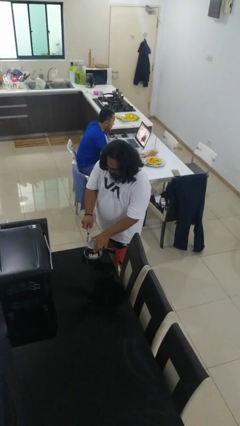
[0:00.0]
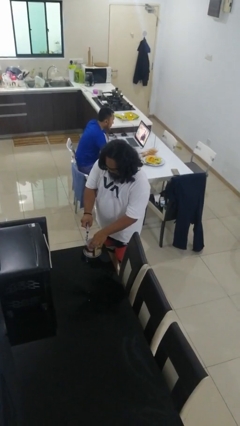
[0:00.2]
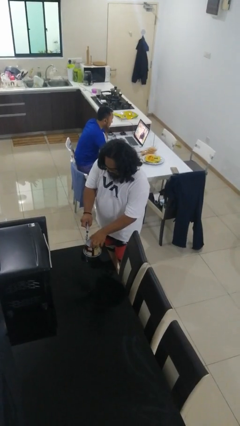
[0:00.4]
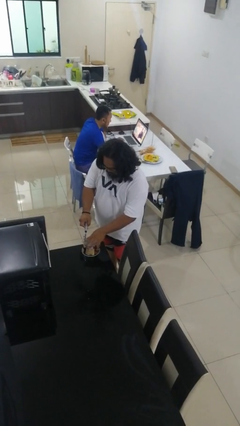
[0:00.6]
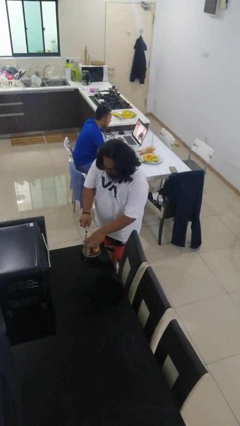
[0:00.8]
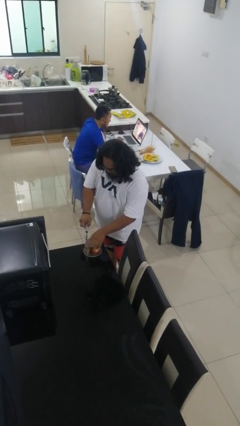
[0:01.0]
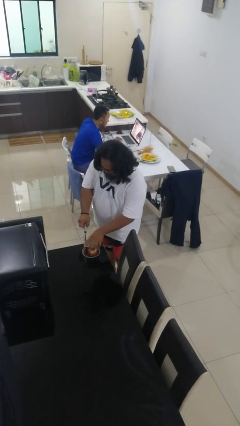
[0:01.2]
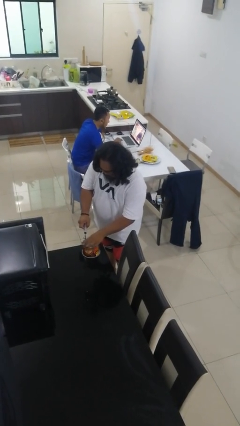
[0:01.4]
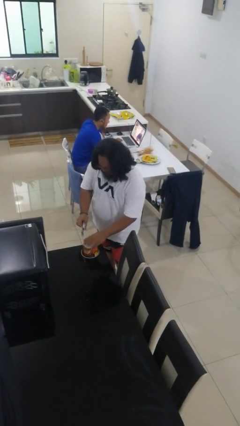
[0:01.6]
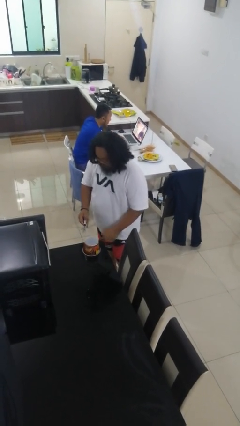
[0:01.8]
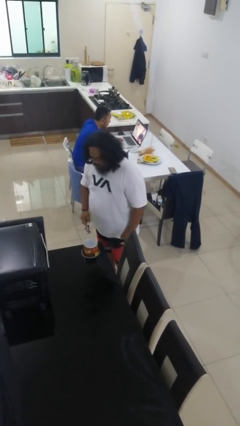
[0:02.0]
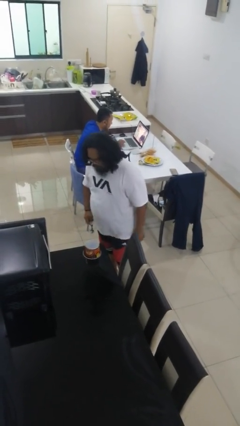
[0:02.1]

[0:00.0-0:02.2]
person opens can with can opener

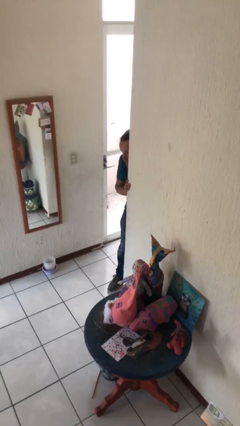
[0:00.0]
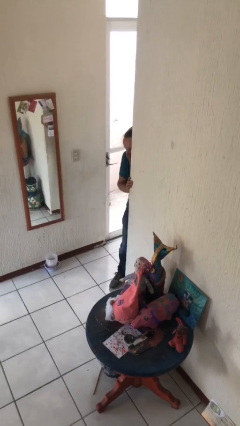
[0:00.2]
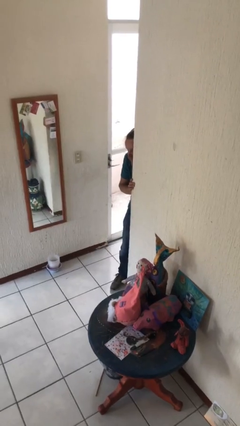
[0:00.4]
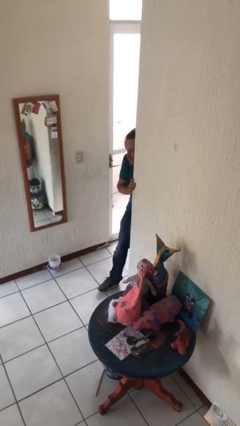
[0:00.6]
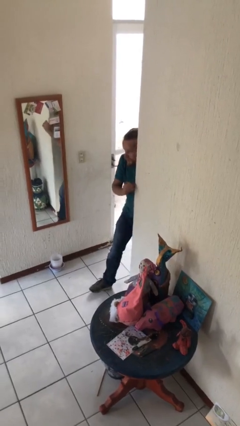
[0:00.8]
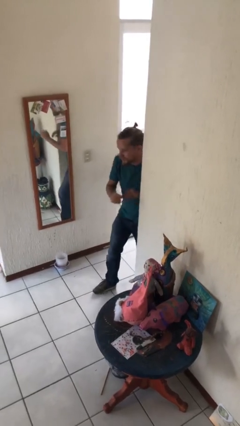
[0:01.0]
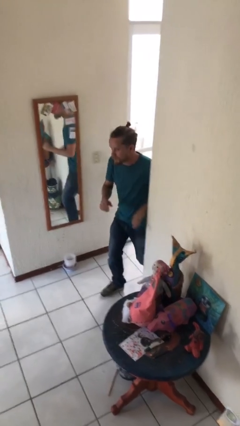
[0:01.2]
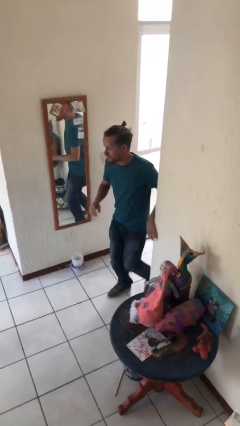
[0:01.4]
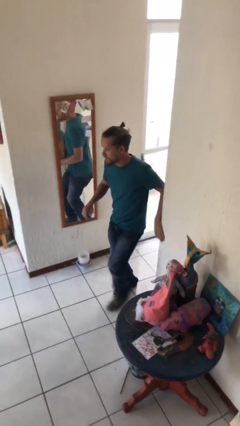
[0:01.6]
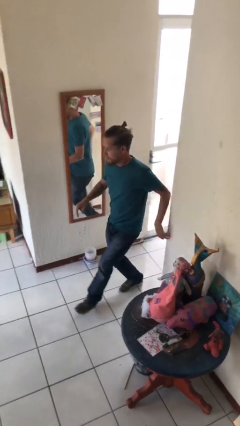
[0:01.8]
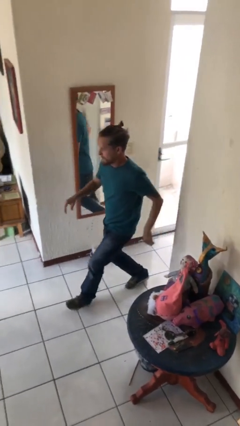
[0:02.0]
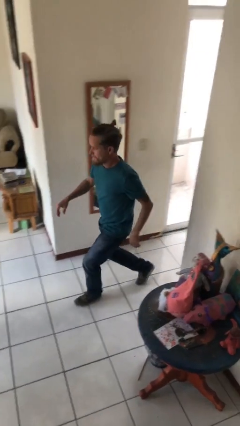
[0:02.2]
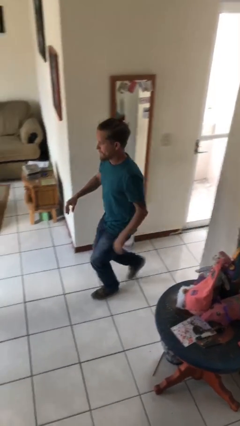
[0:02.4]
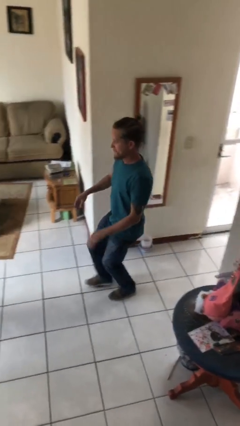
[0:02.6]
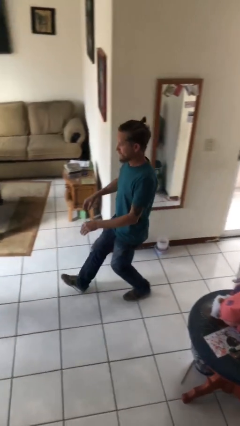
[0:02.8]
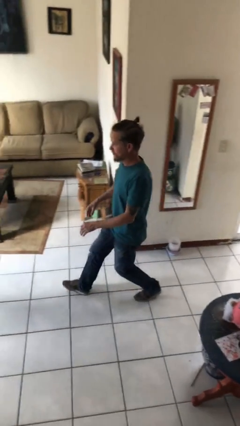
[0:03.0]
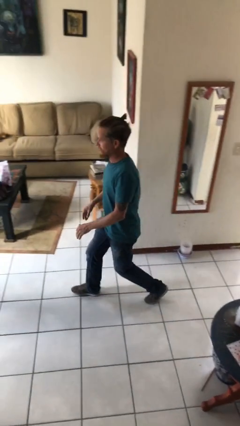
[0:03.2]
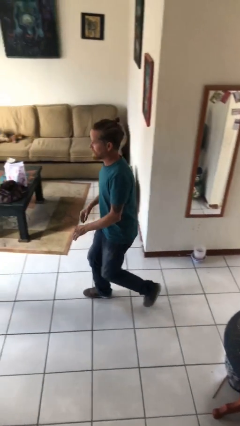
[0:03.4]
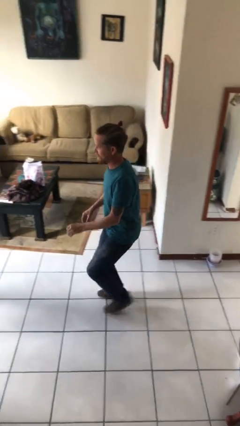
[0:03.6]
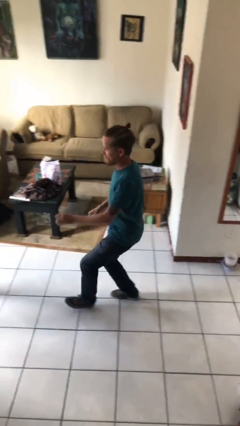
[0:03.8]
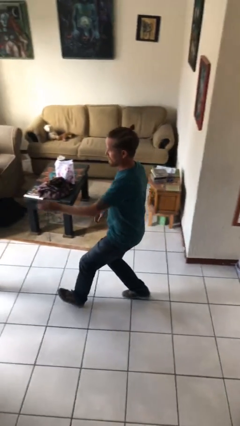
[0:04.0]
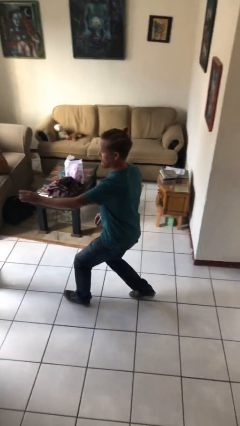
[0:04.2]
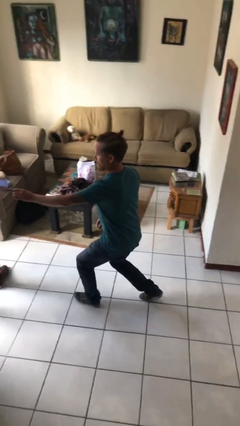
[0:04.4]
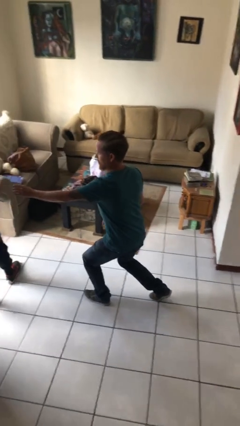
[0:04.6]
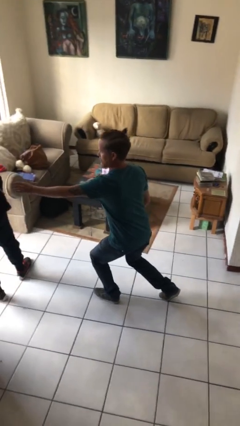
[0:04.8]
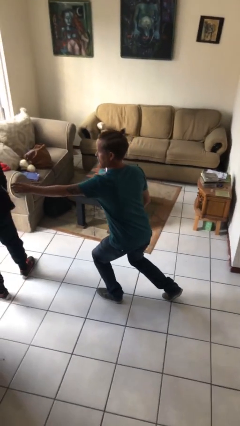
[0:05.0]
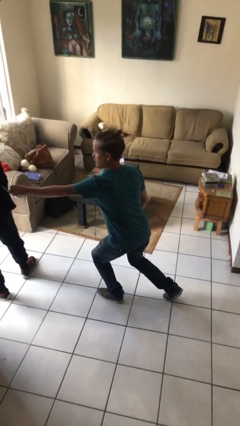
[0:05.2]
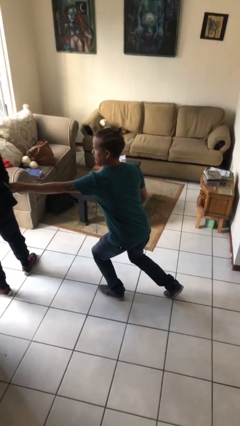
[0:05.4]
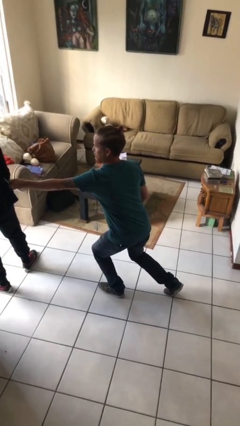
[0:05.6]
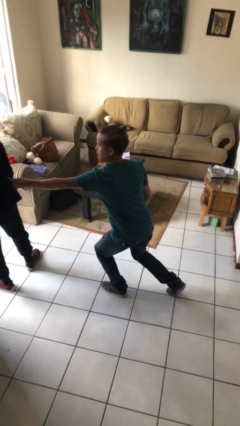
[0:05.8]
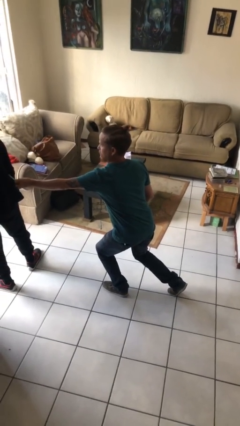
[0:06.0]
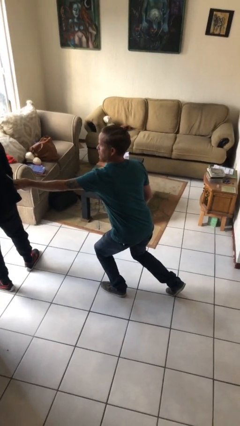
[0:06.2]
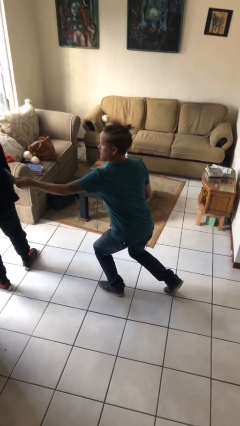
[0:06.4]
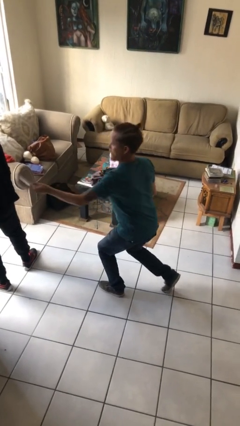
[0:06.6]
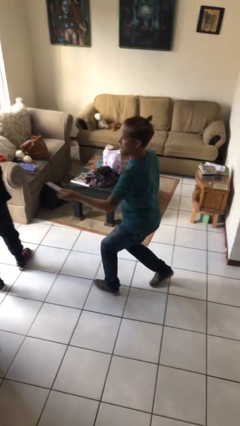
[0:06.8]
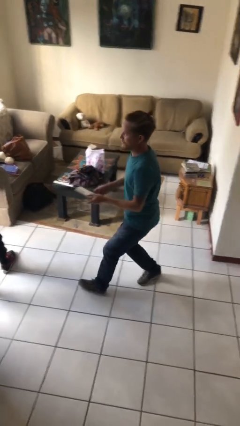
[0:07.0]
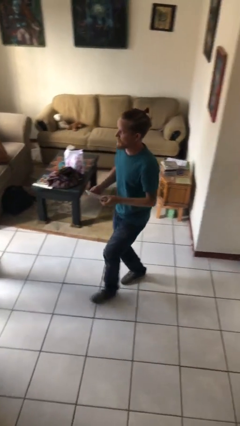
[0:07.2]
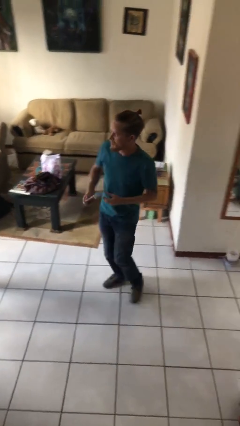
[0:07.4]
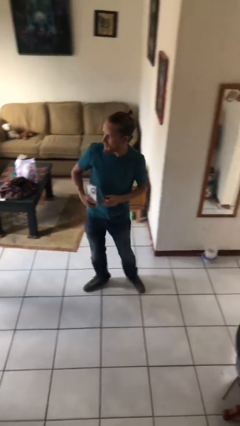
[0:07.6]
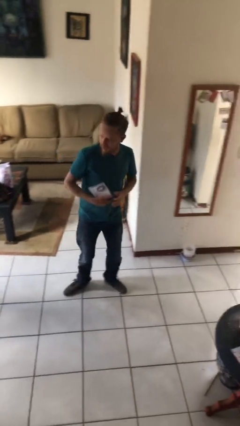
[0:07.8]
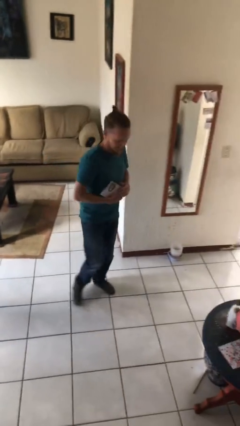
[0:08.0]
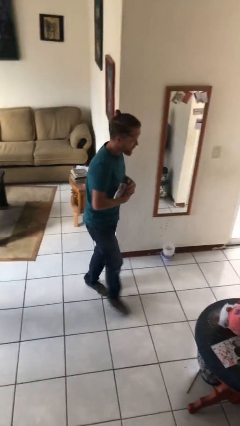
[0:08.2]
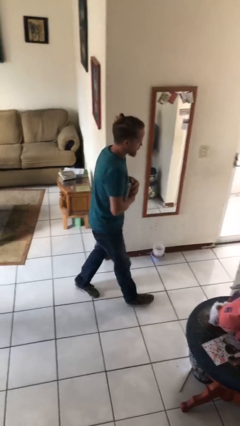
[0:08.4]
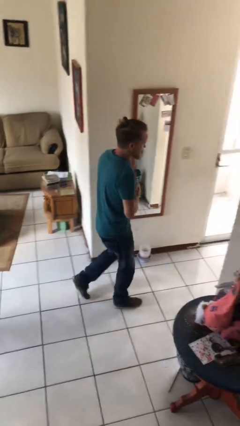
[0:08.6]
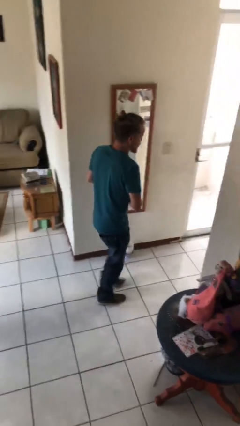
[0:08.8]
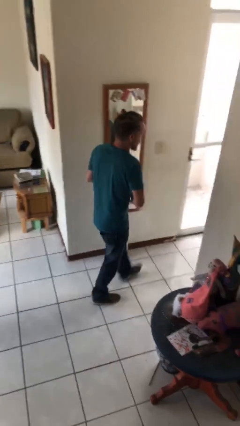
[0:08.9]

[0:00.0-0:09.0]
person steals object from person

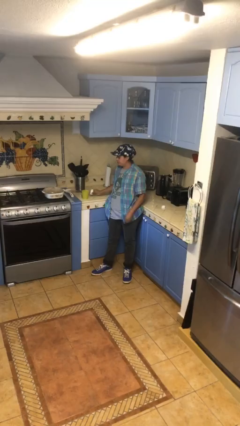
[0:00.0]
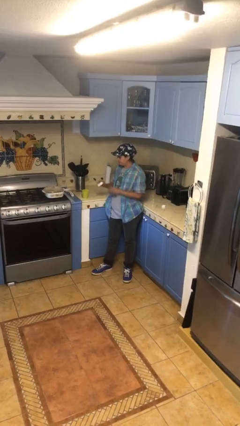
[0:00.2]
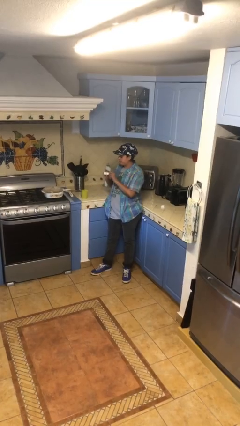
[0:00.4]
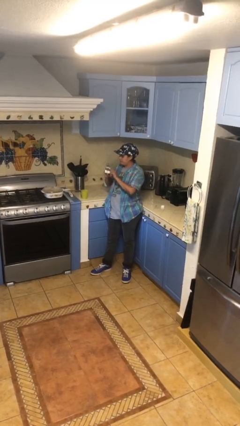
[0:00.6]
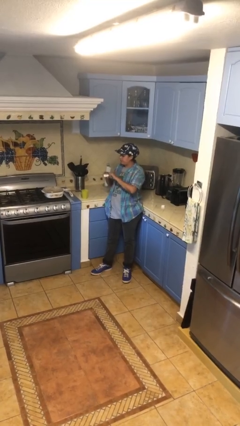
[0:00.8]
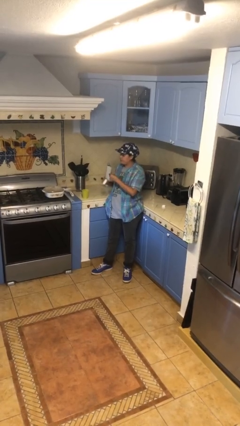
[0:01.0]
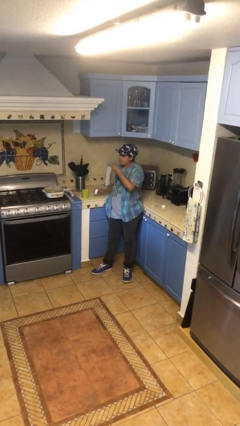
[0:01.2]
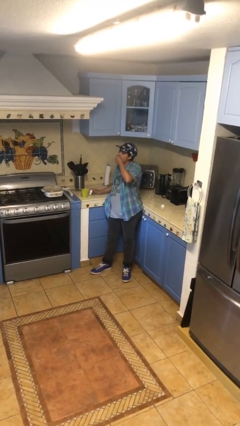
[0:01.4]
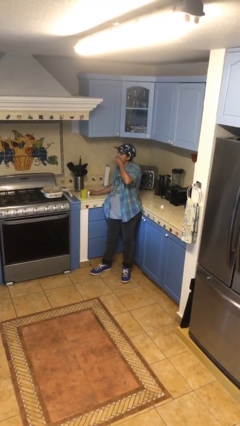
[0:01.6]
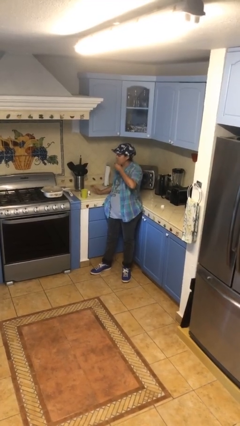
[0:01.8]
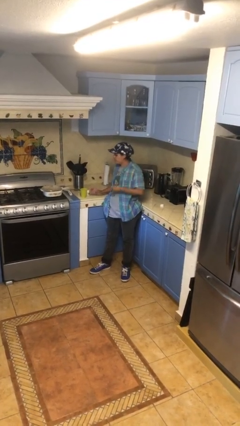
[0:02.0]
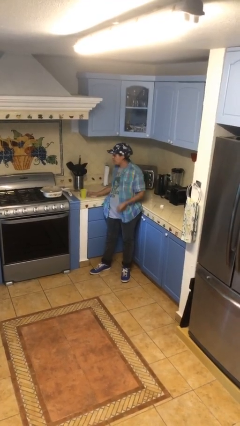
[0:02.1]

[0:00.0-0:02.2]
person takes medicine pills

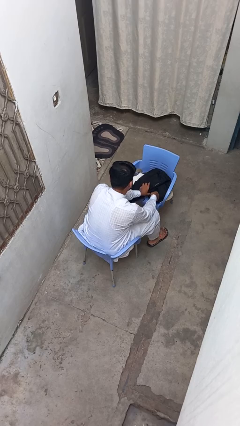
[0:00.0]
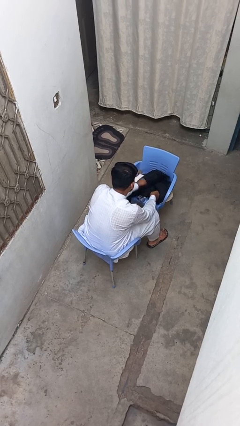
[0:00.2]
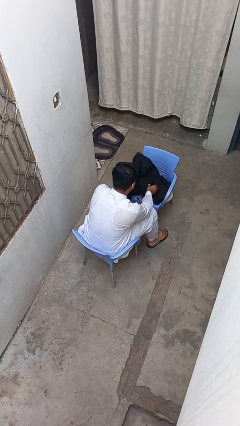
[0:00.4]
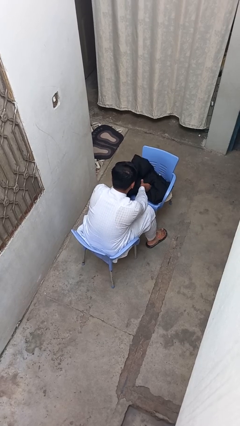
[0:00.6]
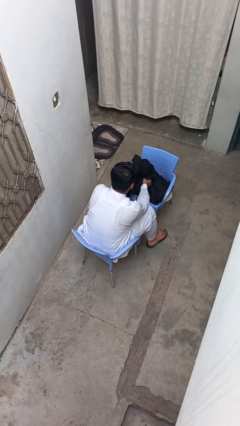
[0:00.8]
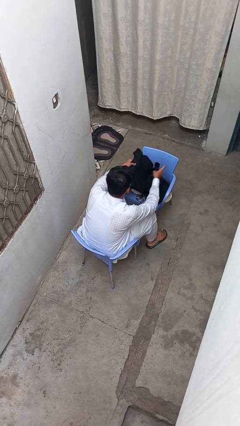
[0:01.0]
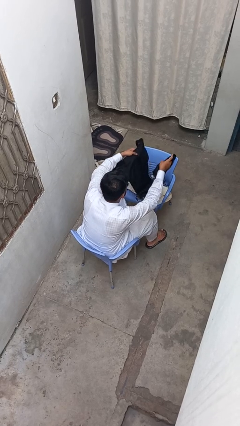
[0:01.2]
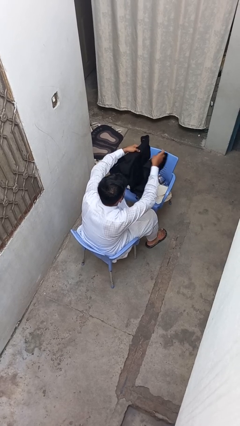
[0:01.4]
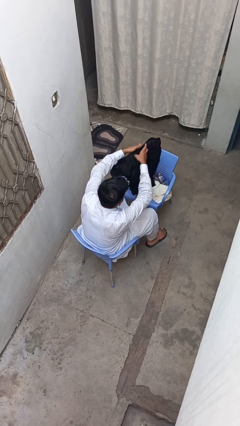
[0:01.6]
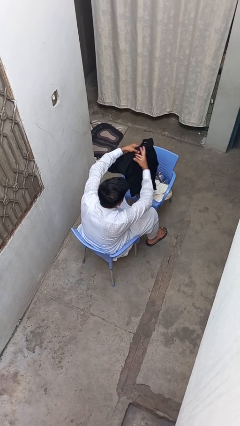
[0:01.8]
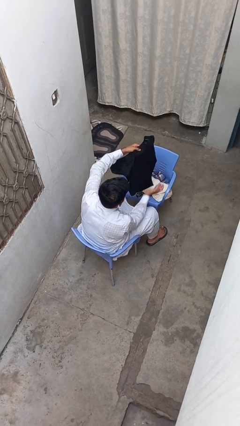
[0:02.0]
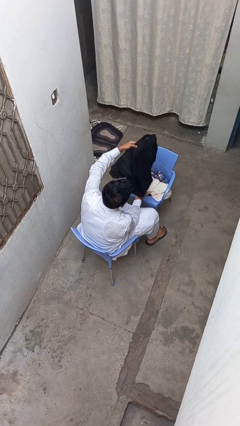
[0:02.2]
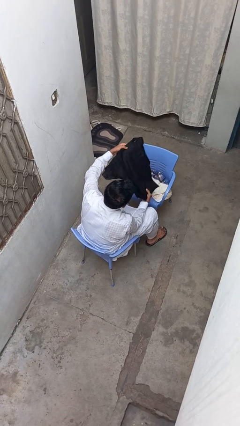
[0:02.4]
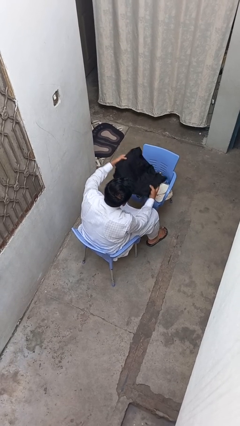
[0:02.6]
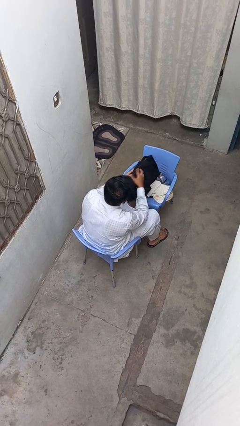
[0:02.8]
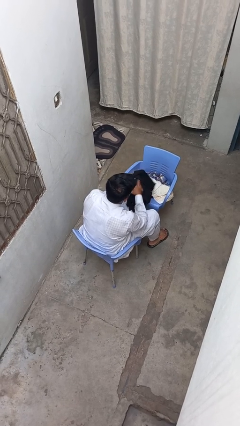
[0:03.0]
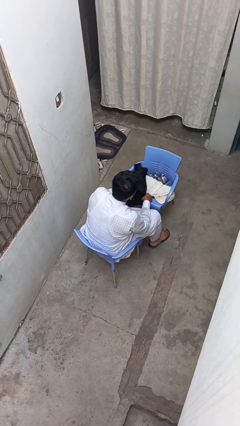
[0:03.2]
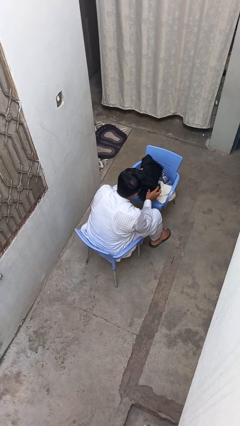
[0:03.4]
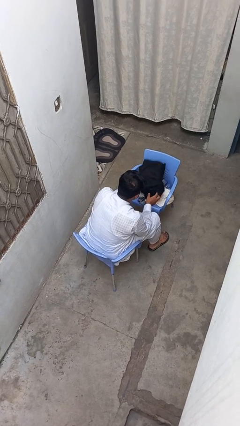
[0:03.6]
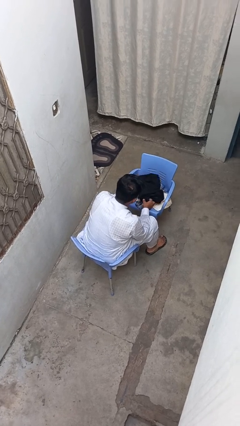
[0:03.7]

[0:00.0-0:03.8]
person folds pants

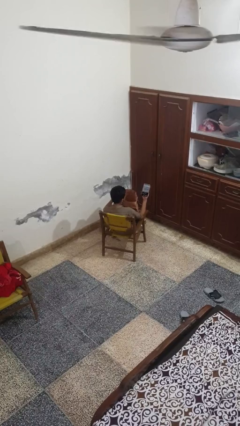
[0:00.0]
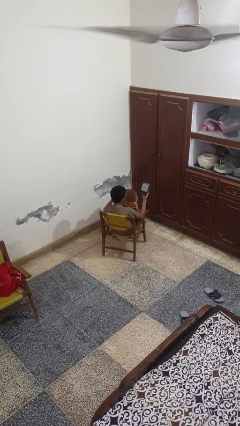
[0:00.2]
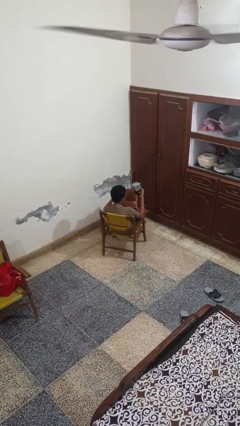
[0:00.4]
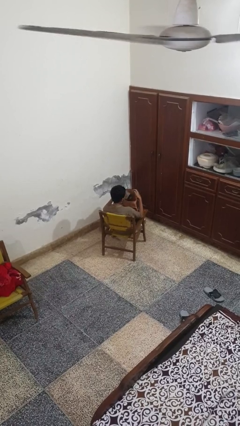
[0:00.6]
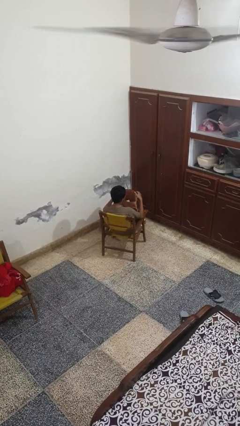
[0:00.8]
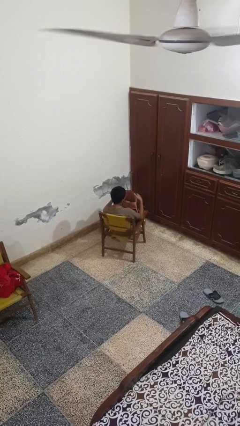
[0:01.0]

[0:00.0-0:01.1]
person puts object into bag
